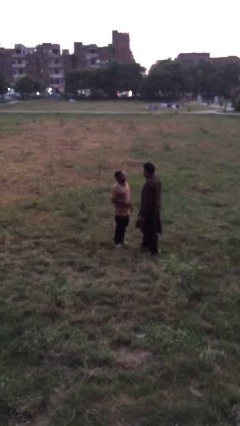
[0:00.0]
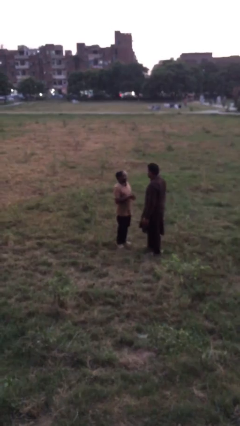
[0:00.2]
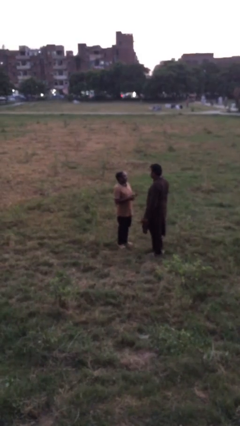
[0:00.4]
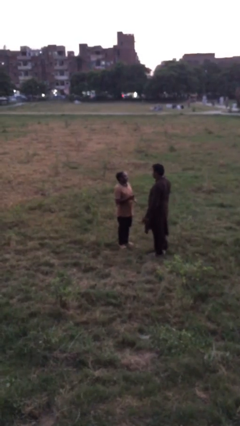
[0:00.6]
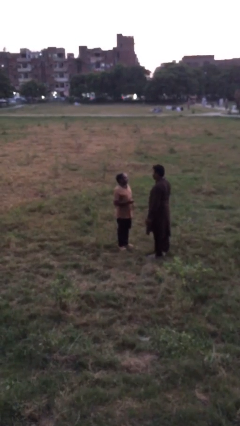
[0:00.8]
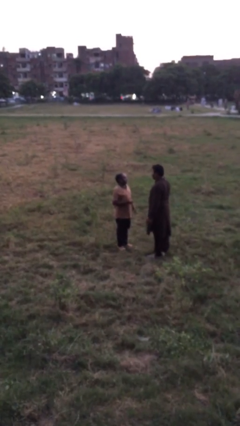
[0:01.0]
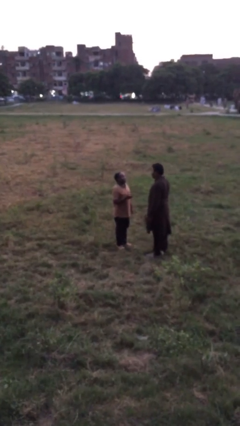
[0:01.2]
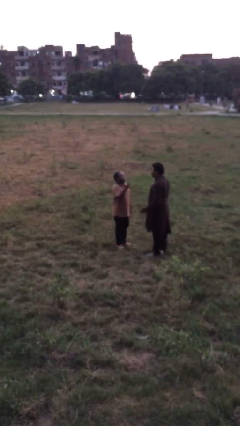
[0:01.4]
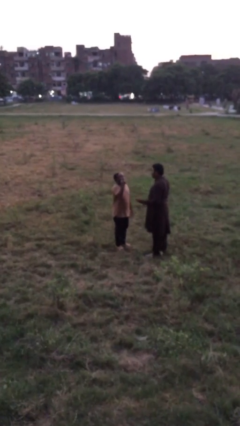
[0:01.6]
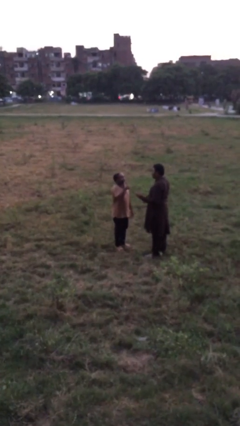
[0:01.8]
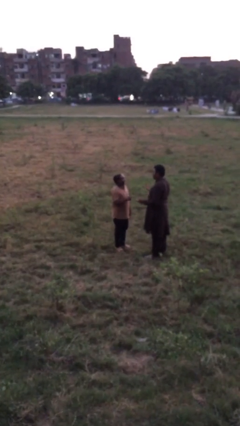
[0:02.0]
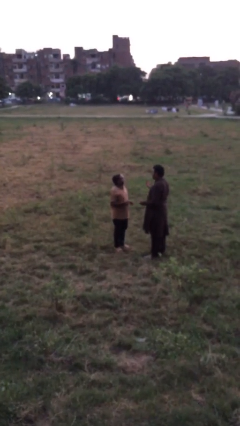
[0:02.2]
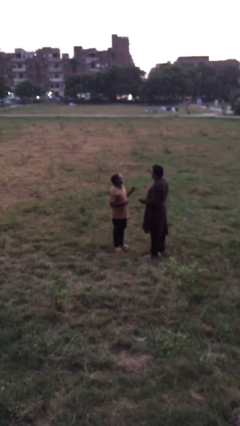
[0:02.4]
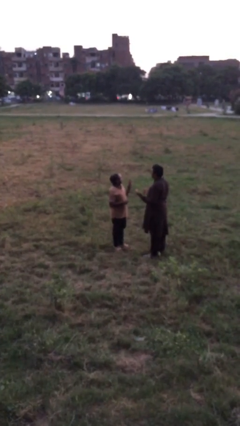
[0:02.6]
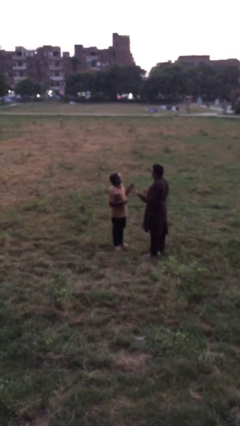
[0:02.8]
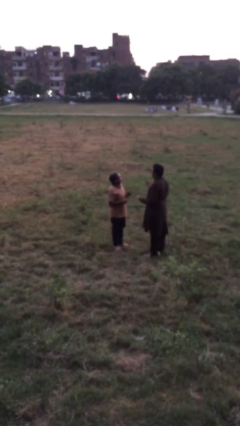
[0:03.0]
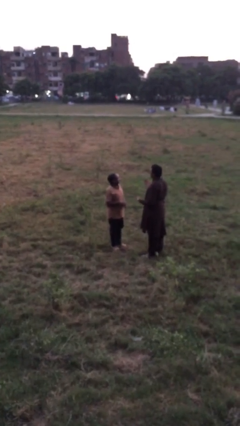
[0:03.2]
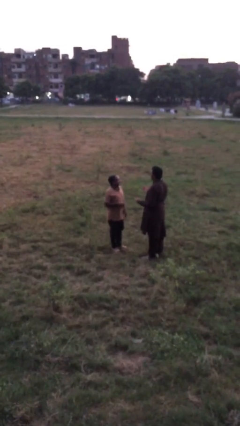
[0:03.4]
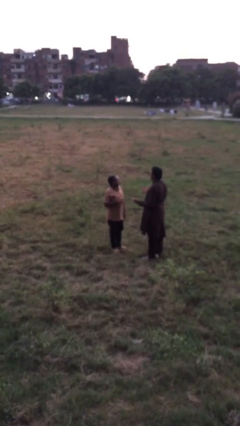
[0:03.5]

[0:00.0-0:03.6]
person talks to person

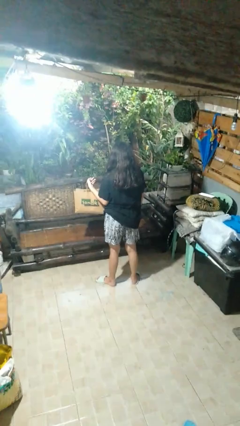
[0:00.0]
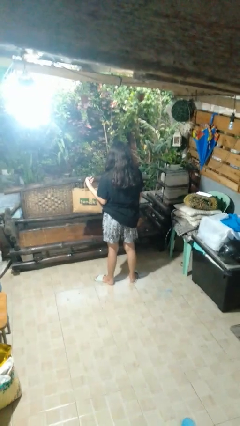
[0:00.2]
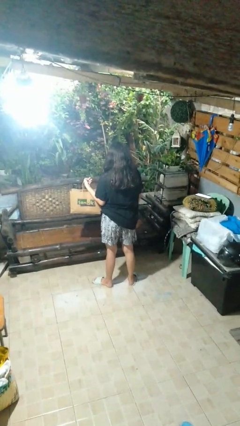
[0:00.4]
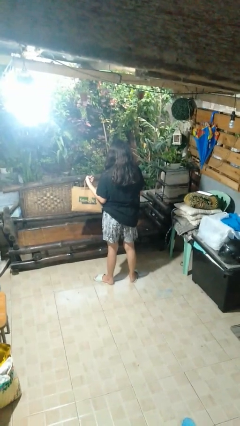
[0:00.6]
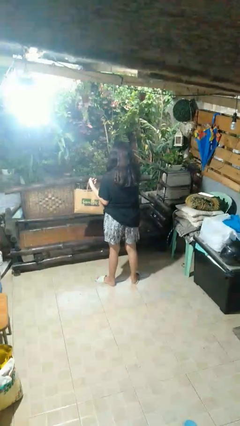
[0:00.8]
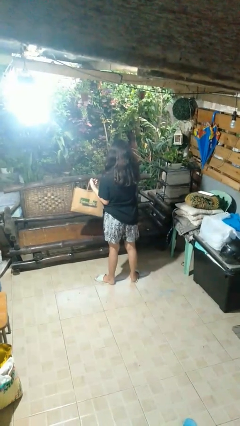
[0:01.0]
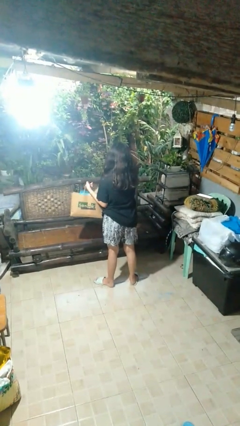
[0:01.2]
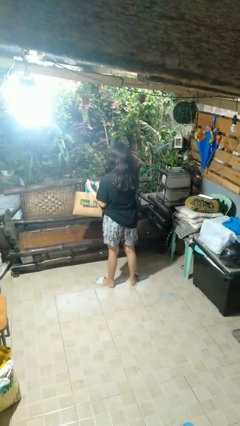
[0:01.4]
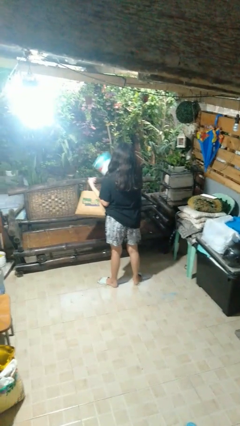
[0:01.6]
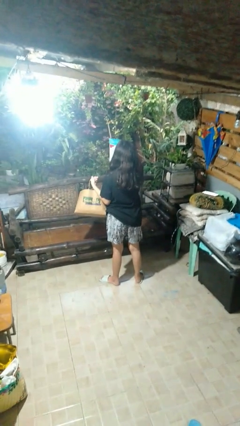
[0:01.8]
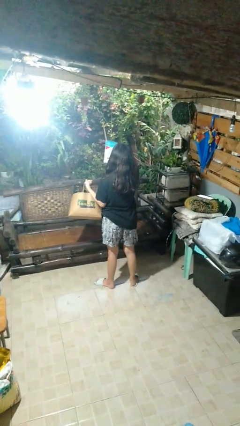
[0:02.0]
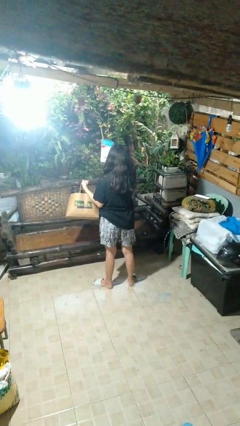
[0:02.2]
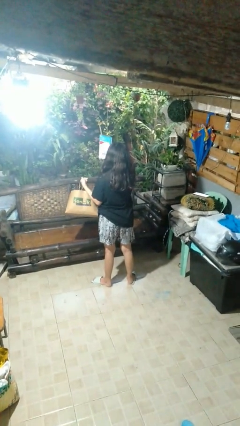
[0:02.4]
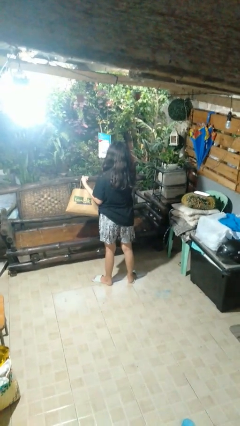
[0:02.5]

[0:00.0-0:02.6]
person takes object from bag

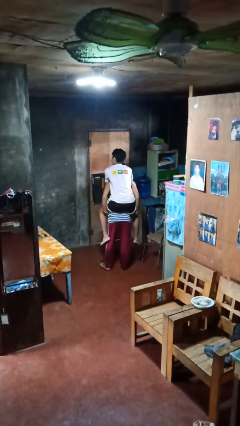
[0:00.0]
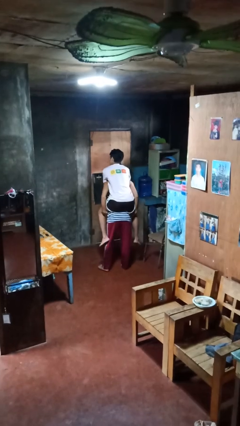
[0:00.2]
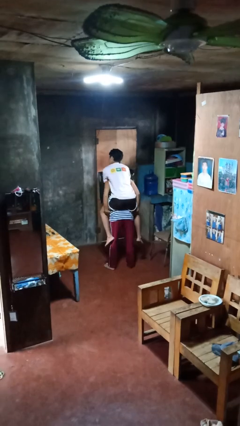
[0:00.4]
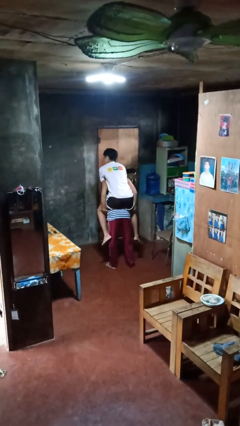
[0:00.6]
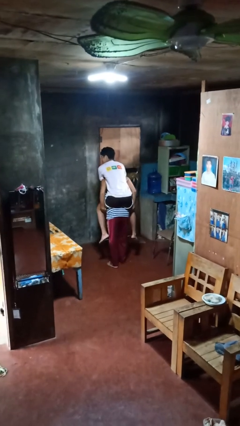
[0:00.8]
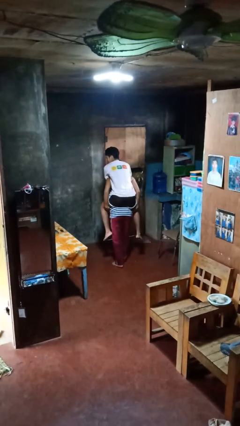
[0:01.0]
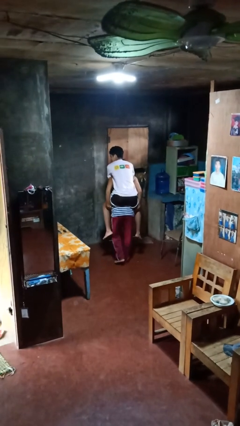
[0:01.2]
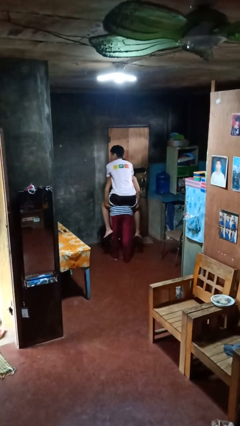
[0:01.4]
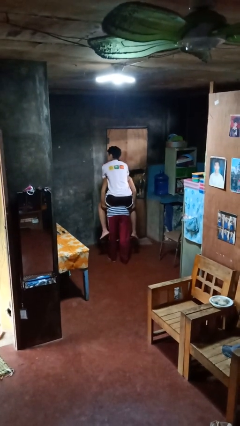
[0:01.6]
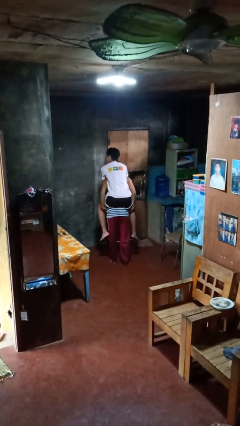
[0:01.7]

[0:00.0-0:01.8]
person carries person on back

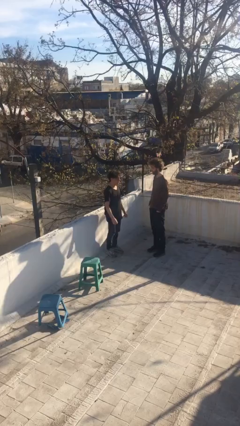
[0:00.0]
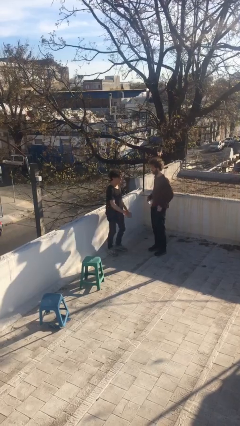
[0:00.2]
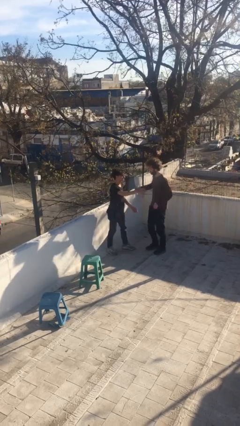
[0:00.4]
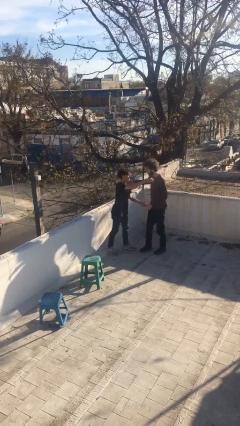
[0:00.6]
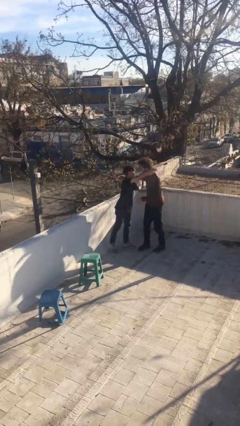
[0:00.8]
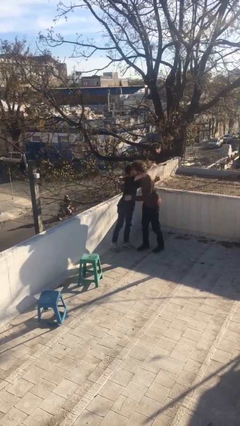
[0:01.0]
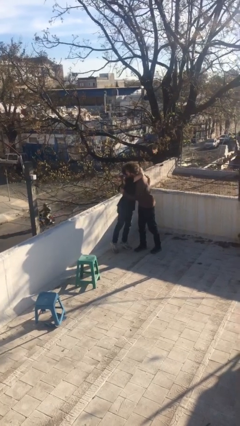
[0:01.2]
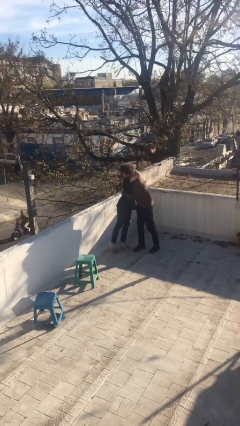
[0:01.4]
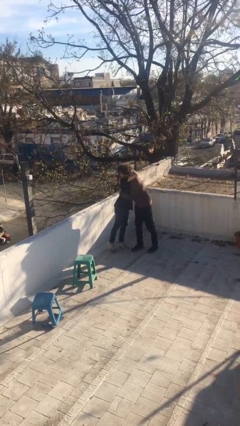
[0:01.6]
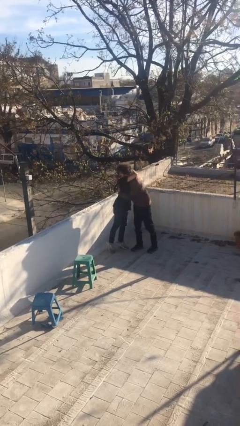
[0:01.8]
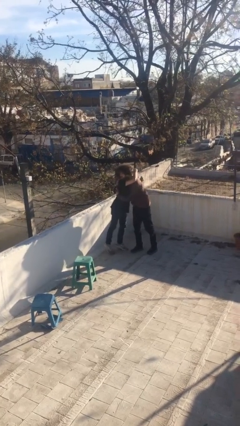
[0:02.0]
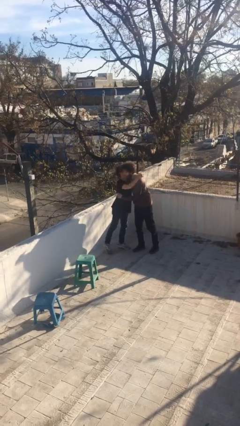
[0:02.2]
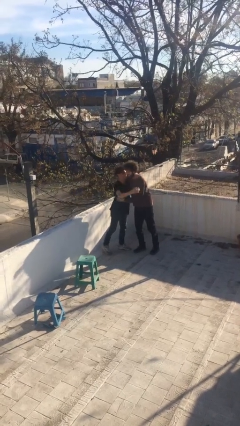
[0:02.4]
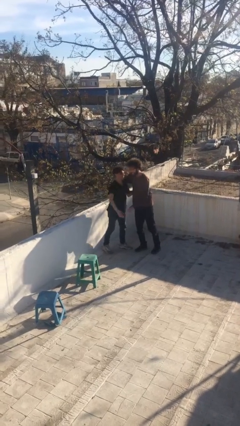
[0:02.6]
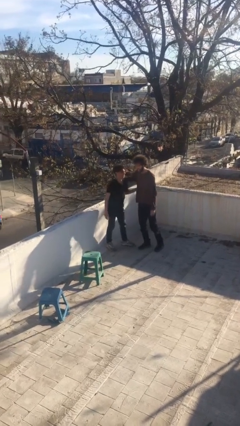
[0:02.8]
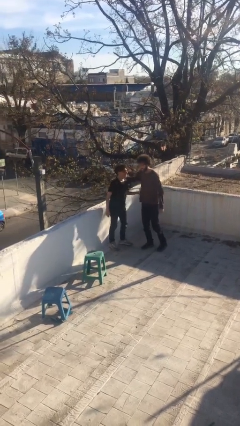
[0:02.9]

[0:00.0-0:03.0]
person embraces person

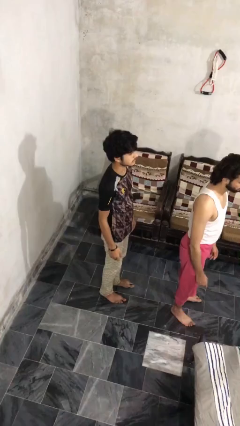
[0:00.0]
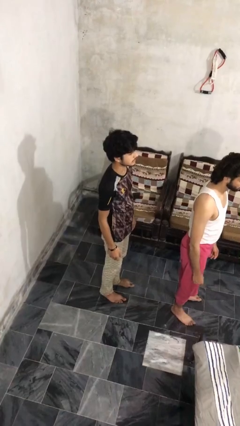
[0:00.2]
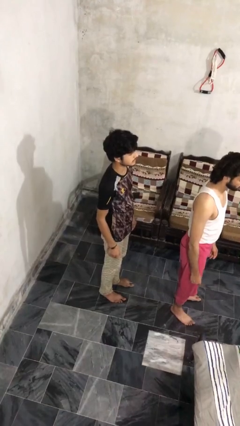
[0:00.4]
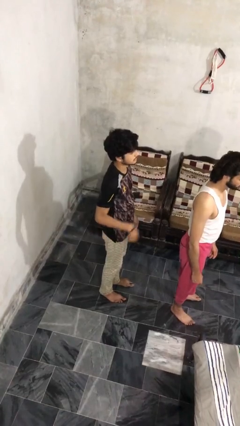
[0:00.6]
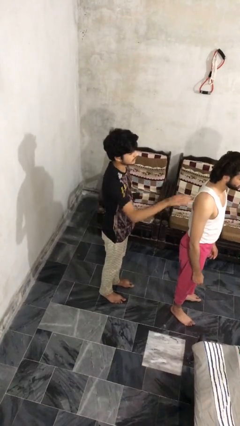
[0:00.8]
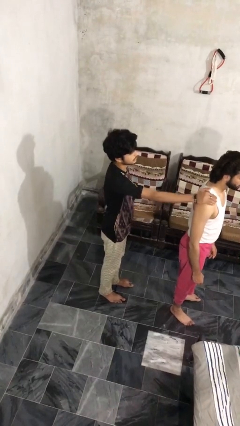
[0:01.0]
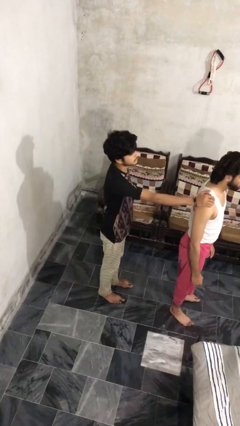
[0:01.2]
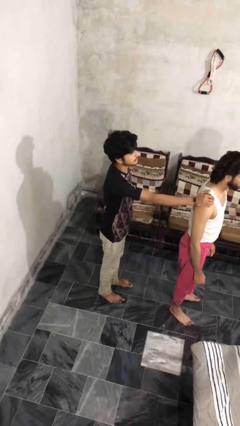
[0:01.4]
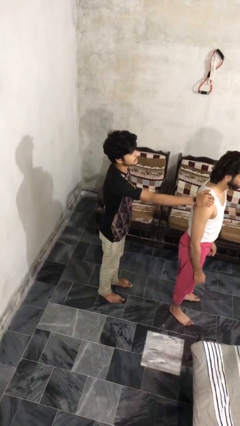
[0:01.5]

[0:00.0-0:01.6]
person grabs person by shoulder

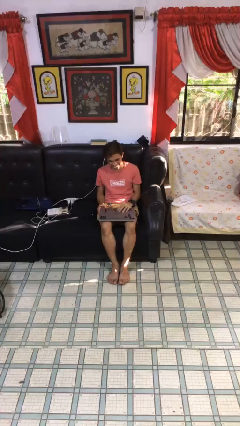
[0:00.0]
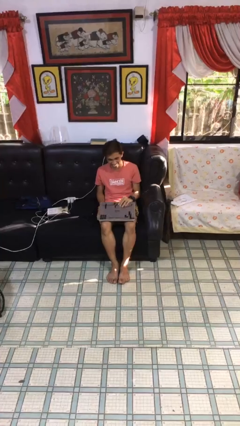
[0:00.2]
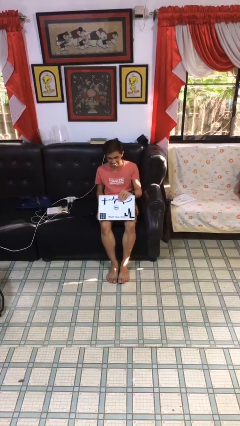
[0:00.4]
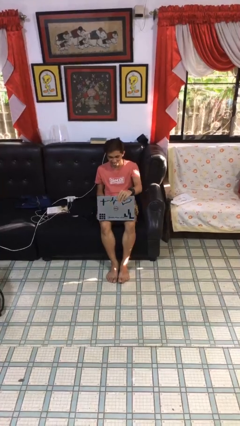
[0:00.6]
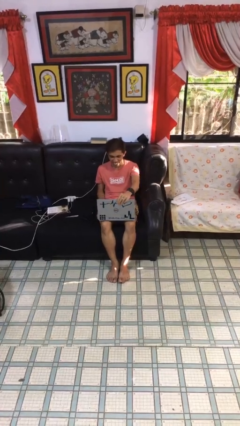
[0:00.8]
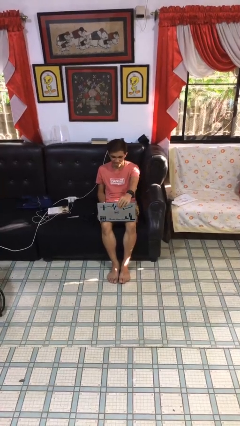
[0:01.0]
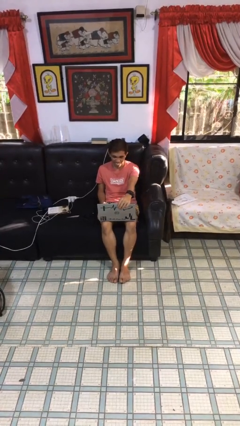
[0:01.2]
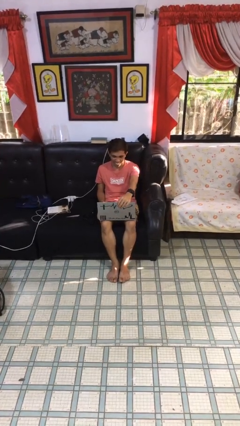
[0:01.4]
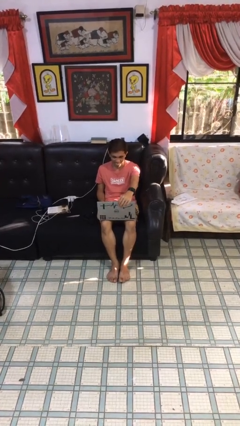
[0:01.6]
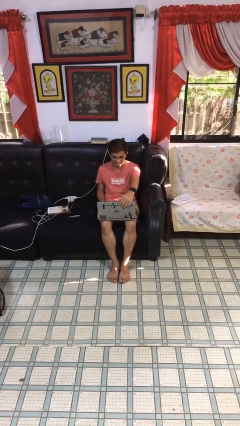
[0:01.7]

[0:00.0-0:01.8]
person interacts with laptop

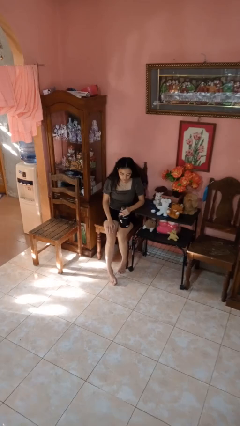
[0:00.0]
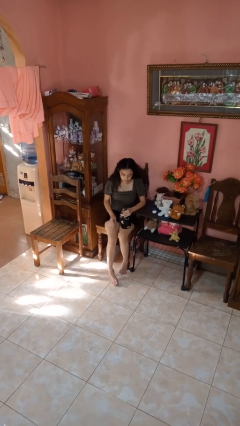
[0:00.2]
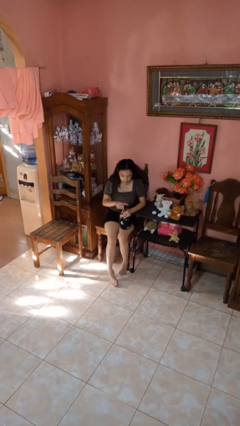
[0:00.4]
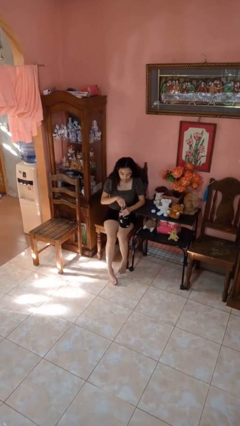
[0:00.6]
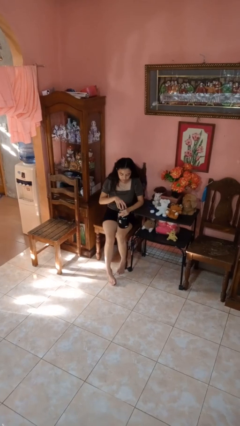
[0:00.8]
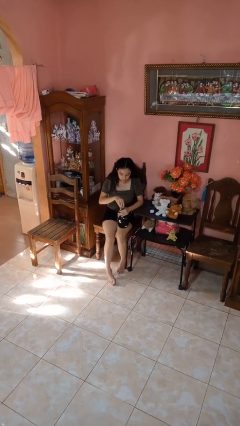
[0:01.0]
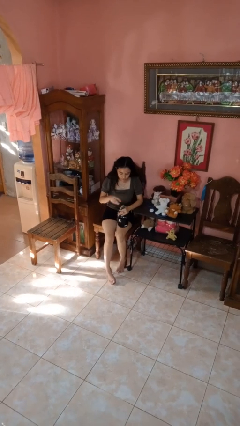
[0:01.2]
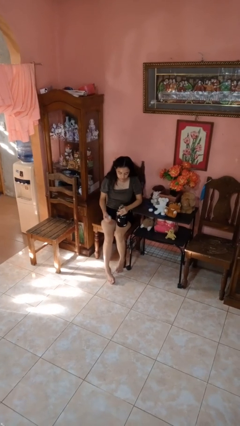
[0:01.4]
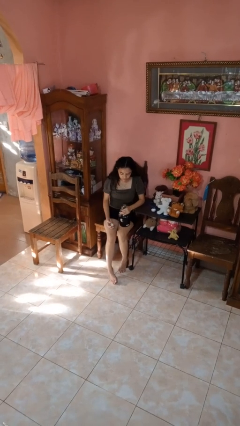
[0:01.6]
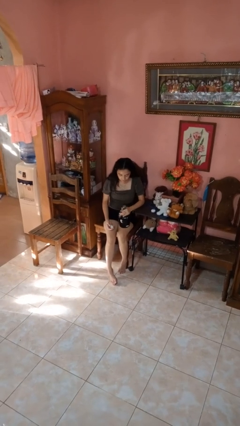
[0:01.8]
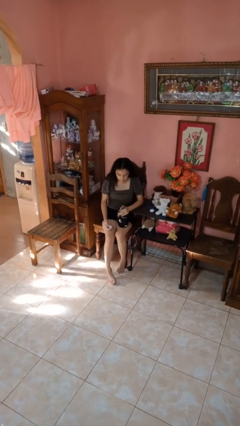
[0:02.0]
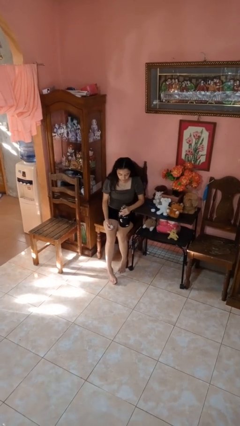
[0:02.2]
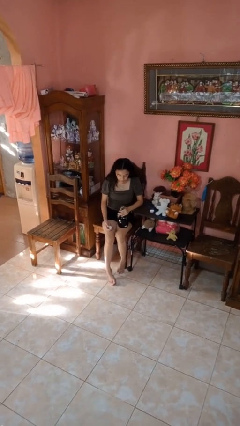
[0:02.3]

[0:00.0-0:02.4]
person unscrews lid from bottle

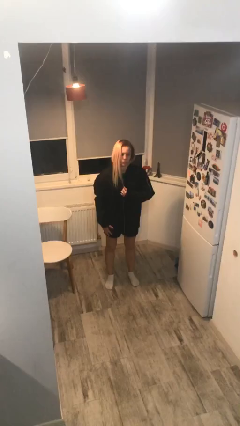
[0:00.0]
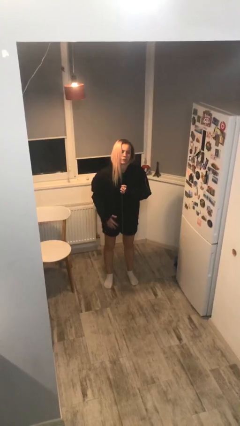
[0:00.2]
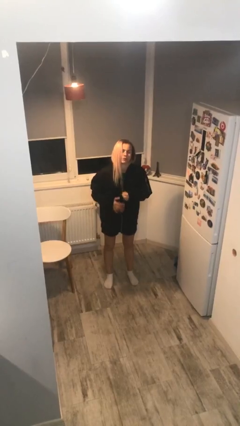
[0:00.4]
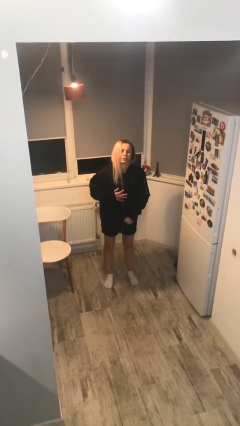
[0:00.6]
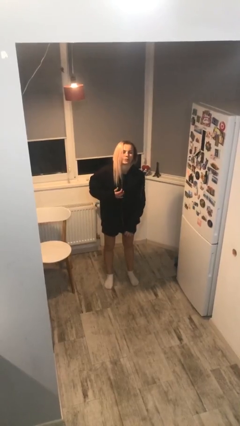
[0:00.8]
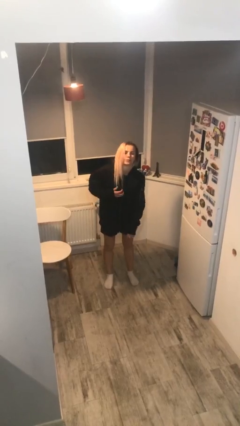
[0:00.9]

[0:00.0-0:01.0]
person unzips jacket
